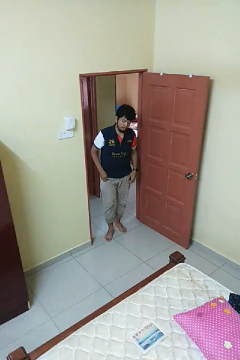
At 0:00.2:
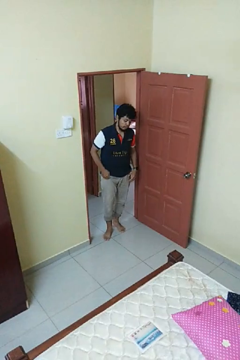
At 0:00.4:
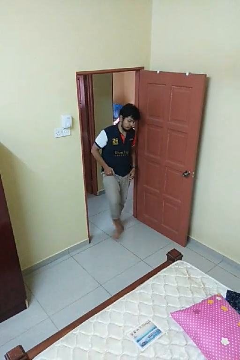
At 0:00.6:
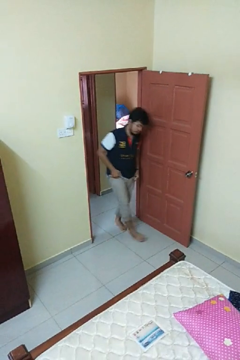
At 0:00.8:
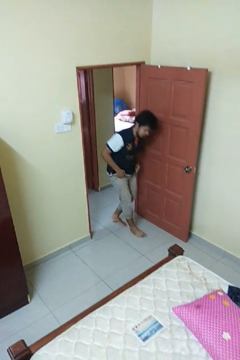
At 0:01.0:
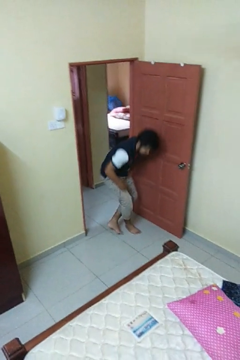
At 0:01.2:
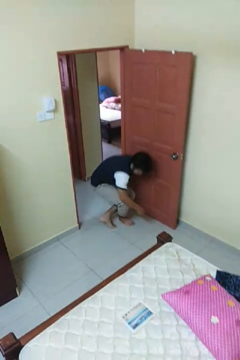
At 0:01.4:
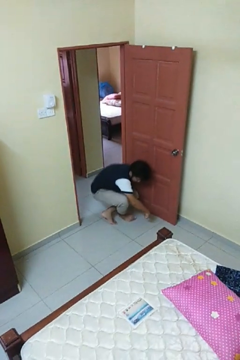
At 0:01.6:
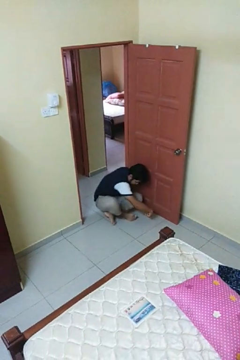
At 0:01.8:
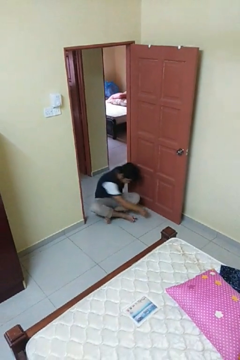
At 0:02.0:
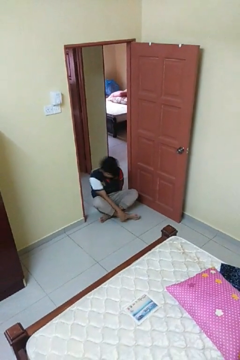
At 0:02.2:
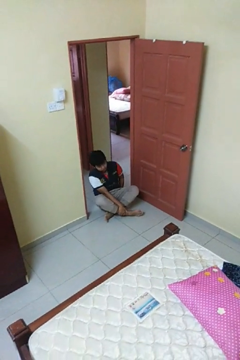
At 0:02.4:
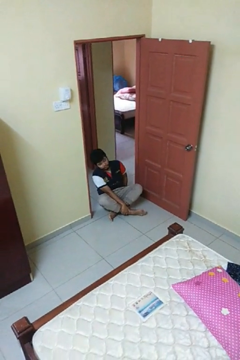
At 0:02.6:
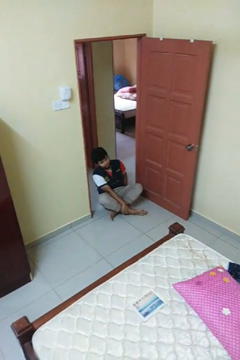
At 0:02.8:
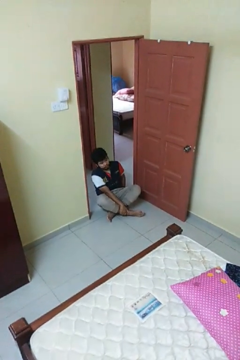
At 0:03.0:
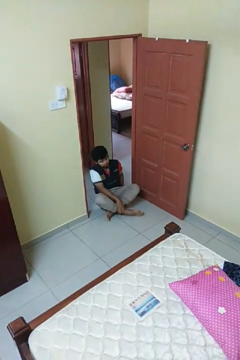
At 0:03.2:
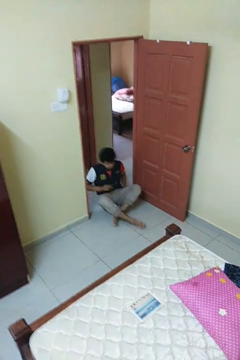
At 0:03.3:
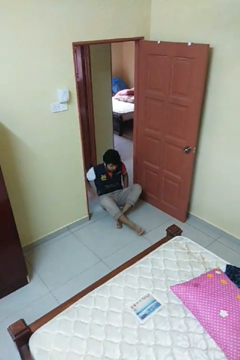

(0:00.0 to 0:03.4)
person sits crisscross

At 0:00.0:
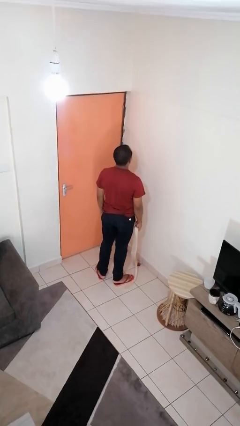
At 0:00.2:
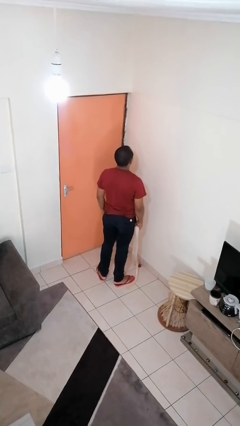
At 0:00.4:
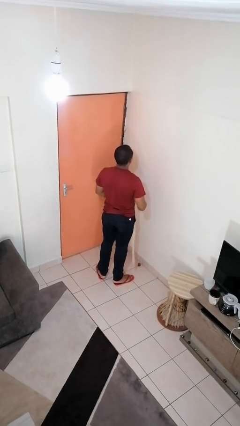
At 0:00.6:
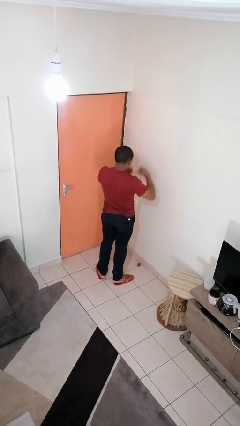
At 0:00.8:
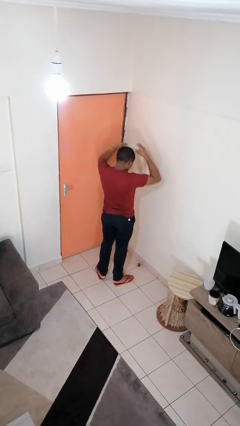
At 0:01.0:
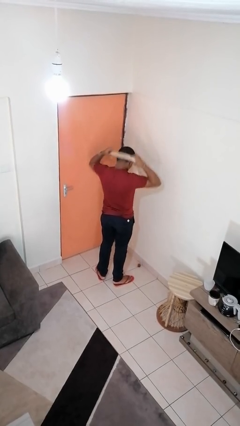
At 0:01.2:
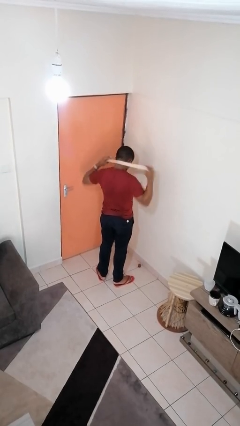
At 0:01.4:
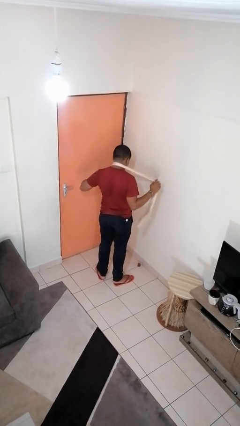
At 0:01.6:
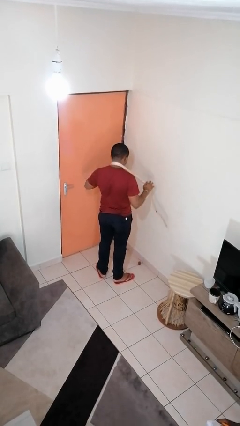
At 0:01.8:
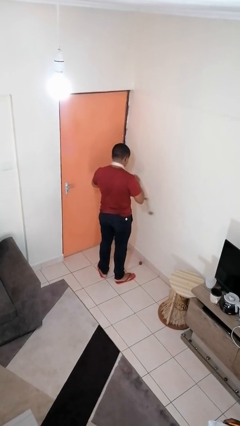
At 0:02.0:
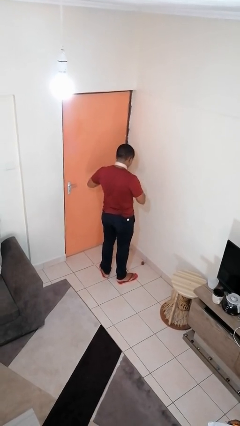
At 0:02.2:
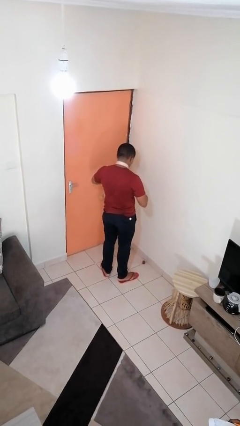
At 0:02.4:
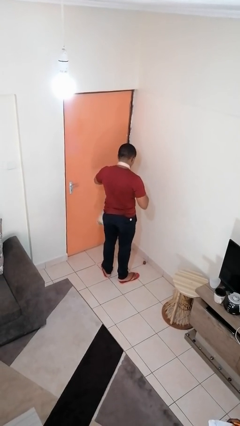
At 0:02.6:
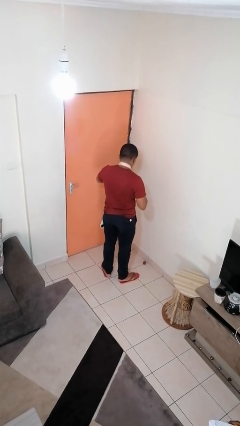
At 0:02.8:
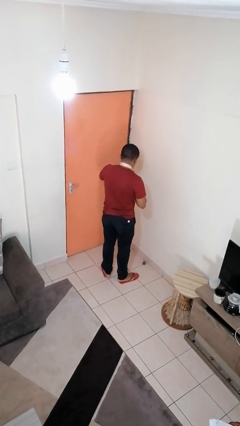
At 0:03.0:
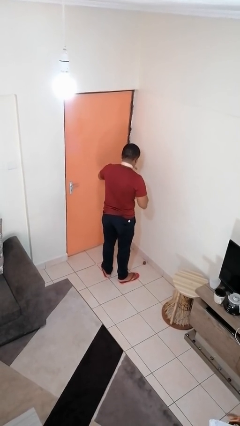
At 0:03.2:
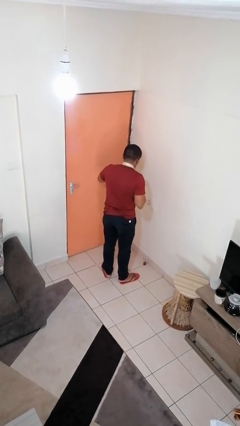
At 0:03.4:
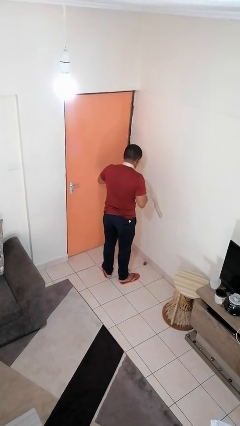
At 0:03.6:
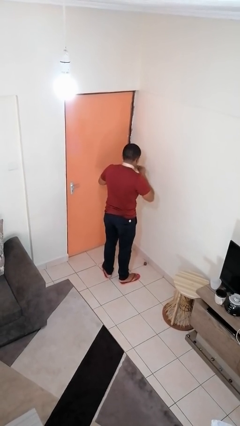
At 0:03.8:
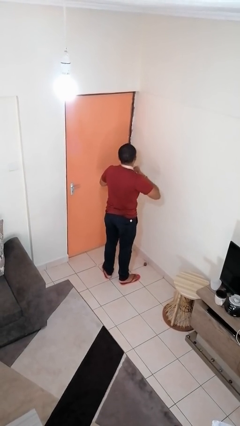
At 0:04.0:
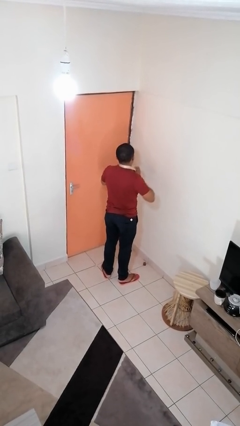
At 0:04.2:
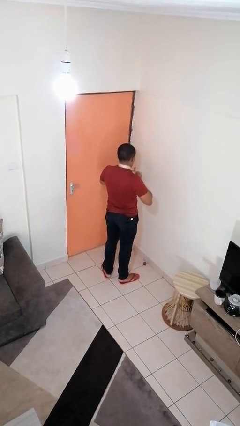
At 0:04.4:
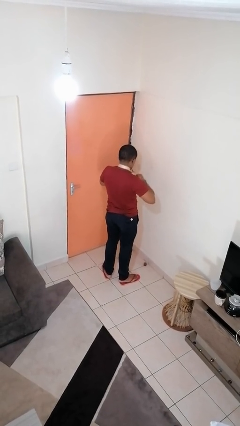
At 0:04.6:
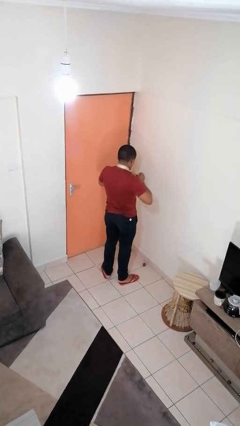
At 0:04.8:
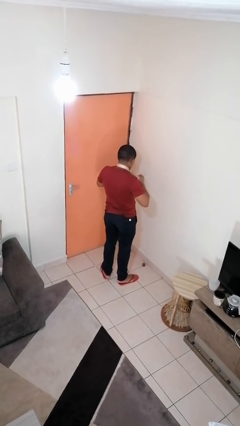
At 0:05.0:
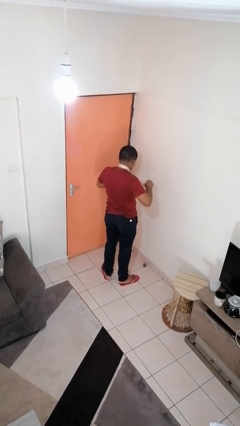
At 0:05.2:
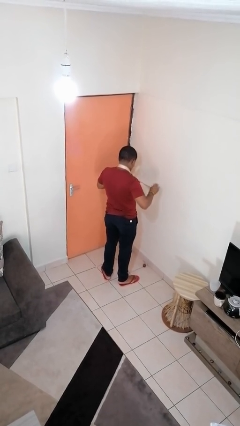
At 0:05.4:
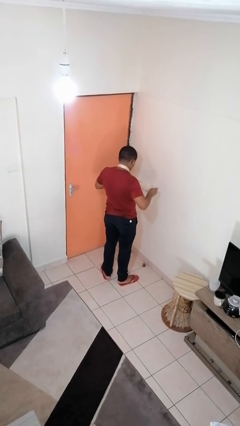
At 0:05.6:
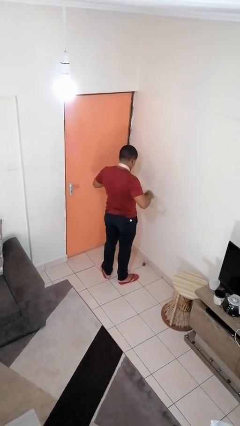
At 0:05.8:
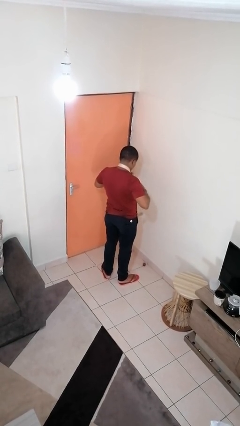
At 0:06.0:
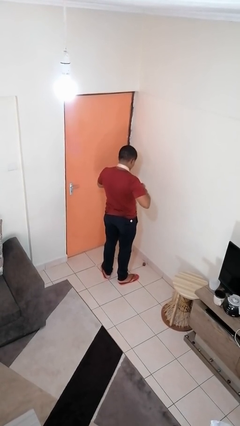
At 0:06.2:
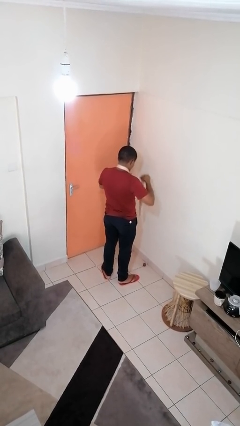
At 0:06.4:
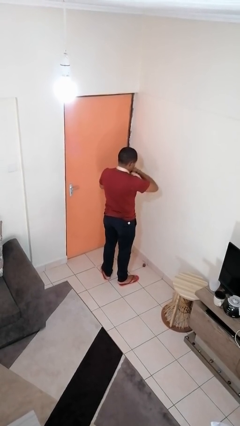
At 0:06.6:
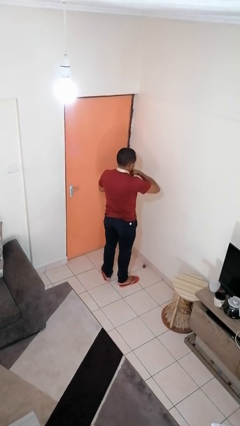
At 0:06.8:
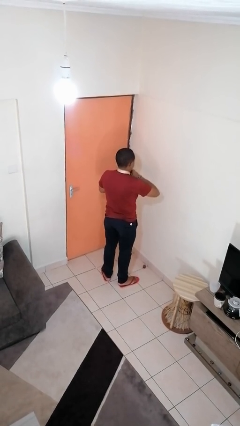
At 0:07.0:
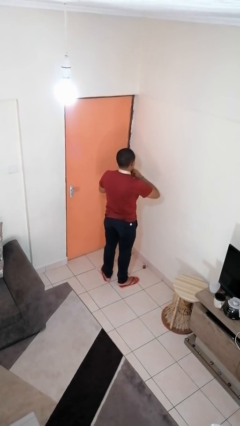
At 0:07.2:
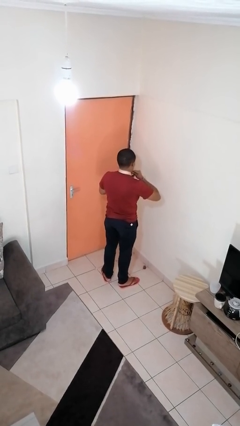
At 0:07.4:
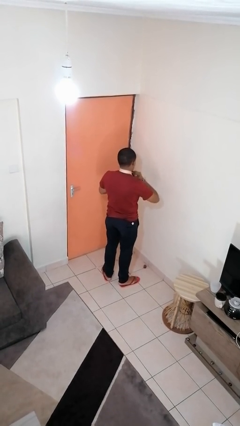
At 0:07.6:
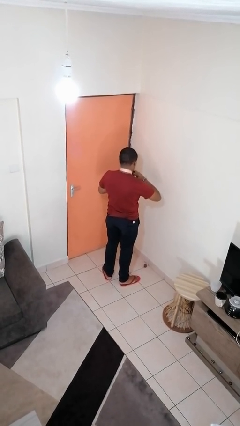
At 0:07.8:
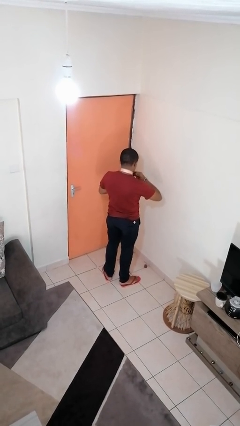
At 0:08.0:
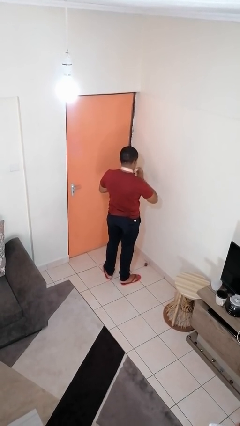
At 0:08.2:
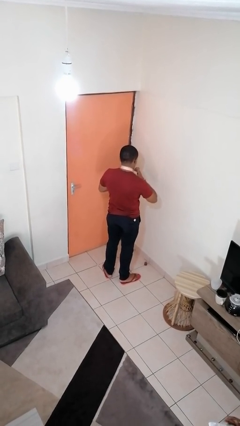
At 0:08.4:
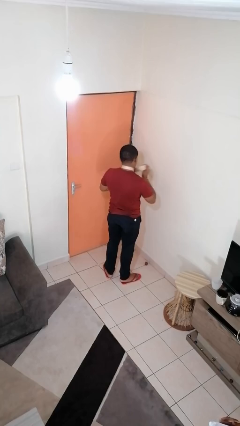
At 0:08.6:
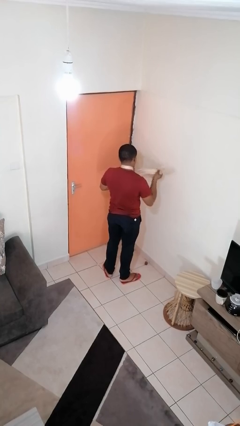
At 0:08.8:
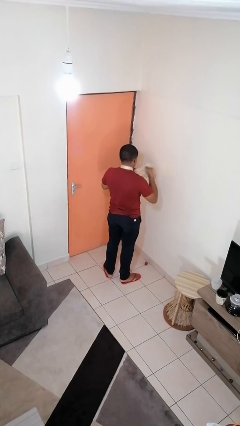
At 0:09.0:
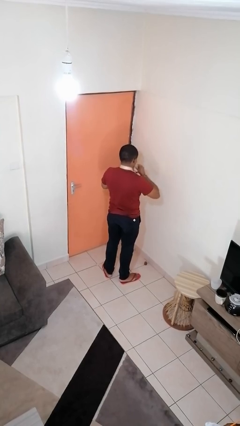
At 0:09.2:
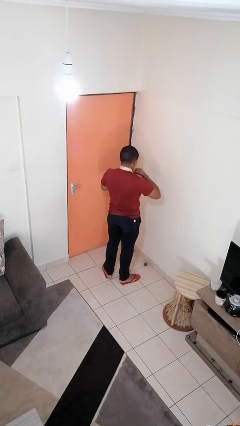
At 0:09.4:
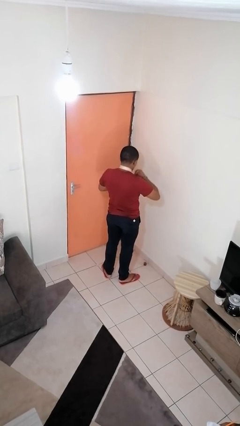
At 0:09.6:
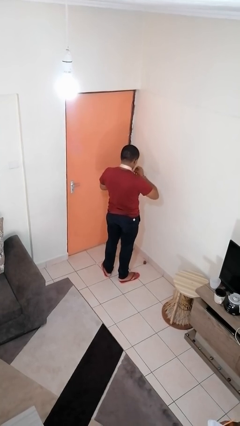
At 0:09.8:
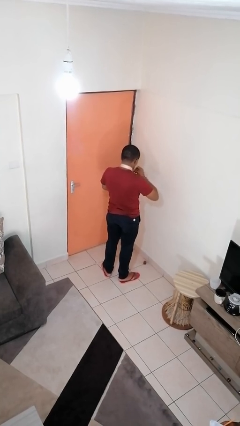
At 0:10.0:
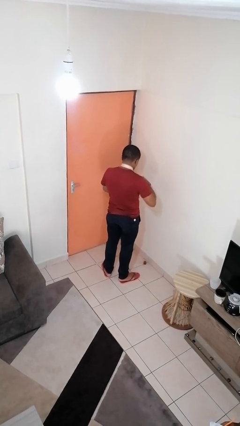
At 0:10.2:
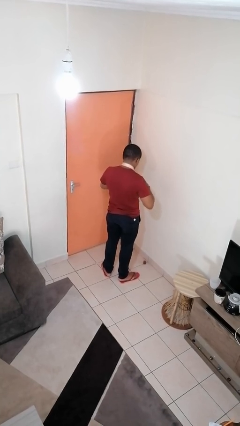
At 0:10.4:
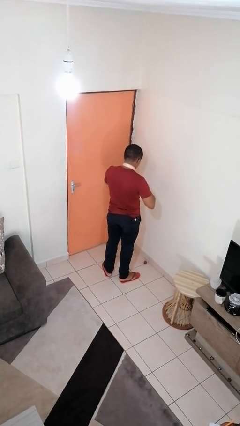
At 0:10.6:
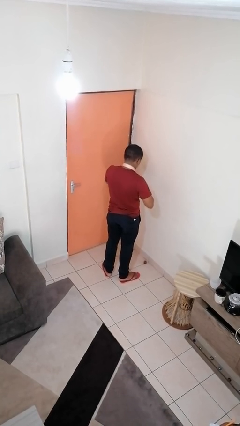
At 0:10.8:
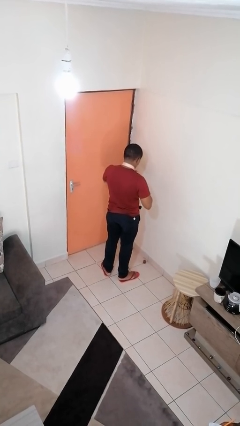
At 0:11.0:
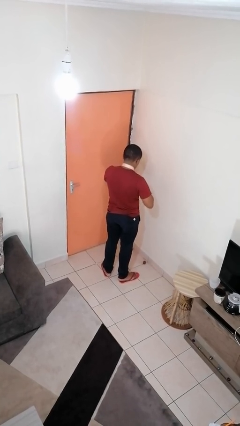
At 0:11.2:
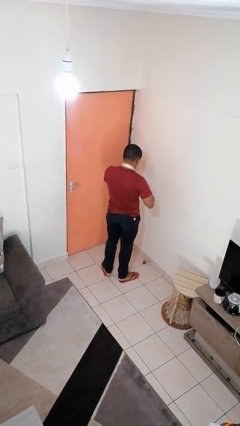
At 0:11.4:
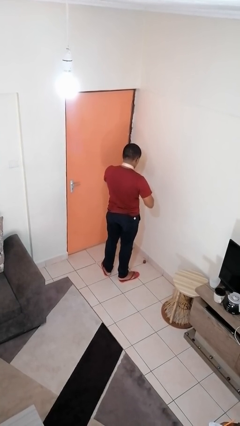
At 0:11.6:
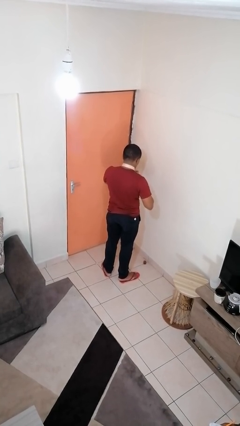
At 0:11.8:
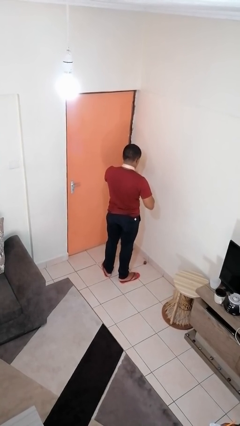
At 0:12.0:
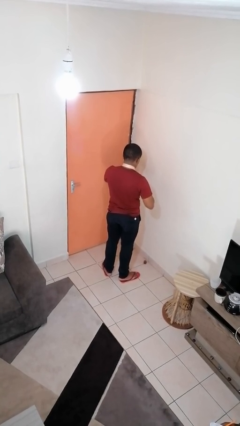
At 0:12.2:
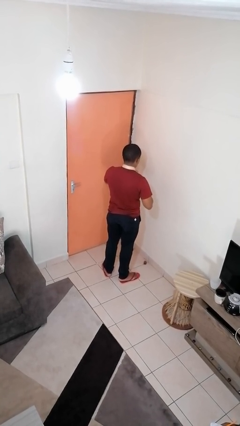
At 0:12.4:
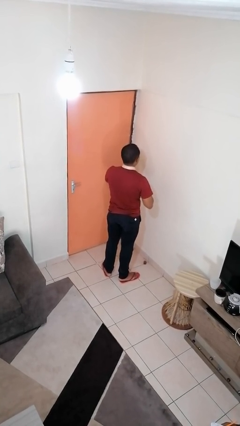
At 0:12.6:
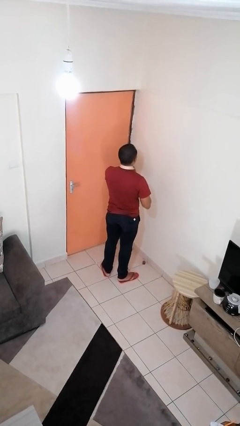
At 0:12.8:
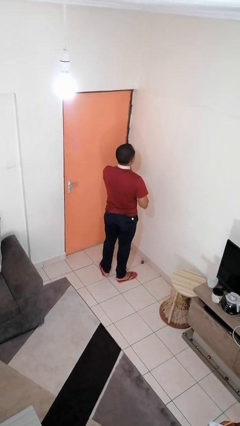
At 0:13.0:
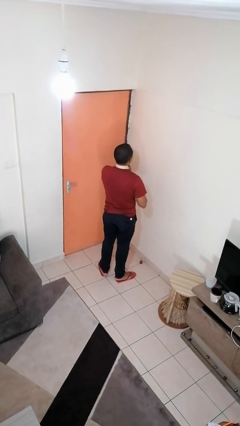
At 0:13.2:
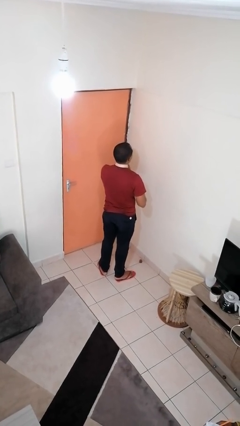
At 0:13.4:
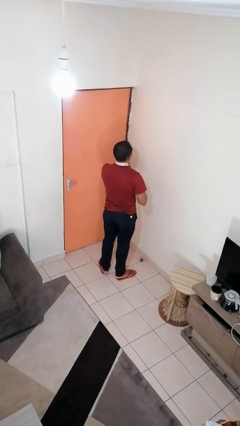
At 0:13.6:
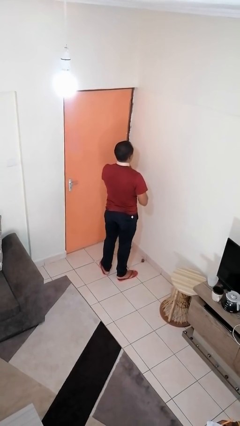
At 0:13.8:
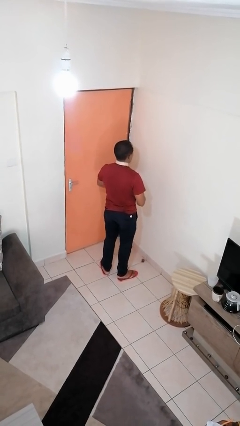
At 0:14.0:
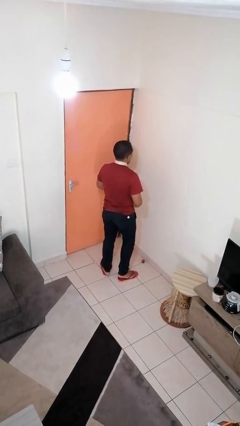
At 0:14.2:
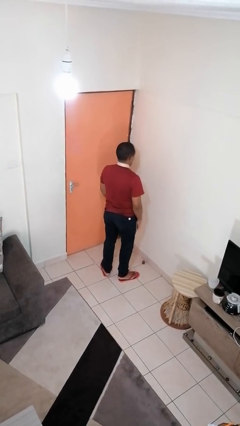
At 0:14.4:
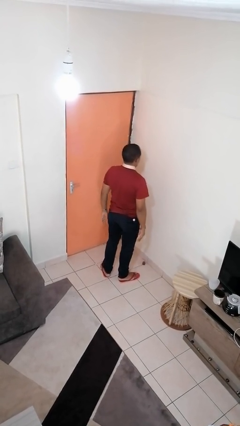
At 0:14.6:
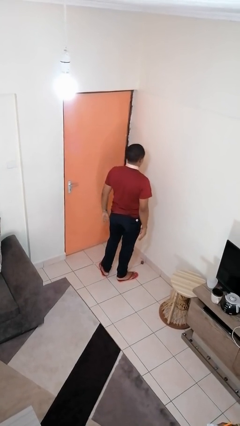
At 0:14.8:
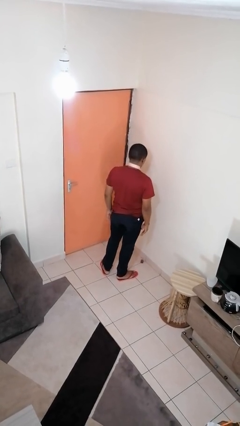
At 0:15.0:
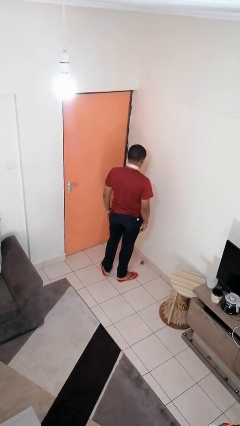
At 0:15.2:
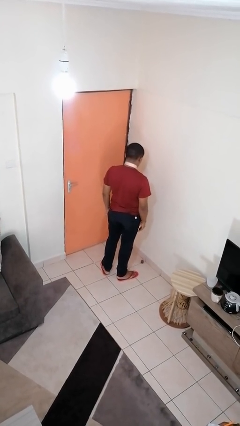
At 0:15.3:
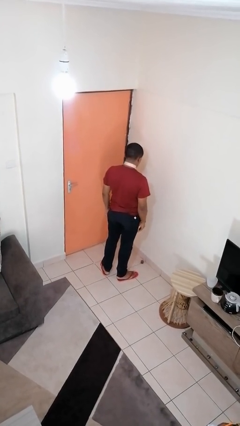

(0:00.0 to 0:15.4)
person puts on necktie
